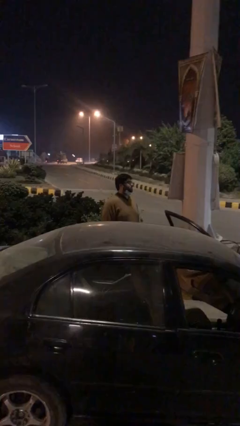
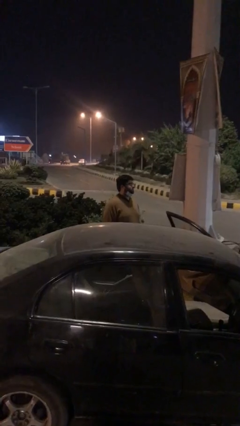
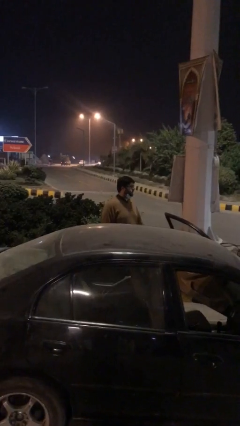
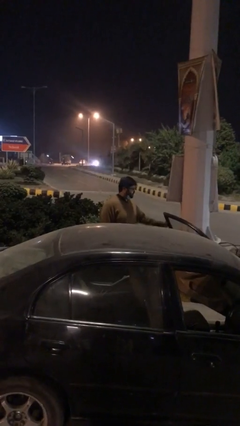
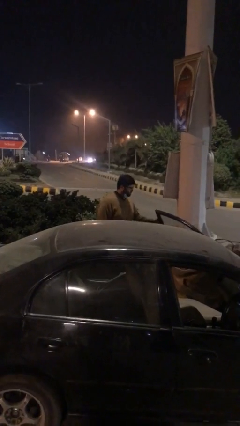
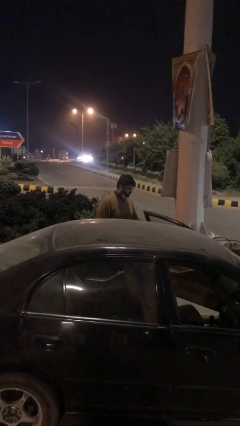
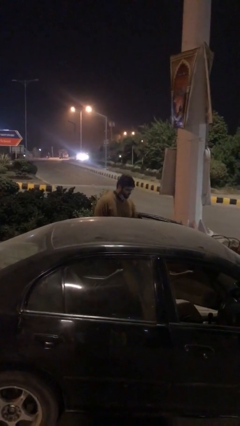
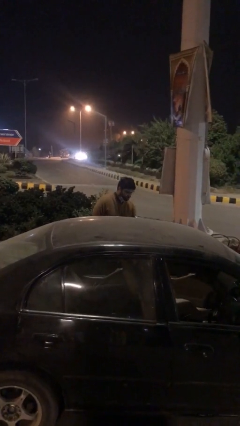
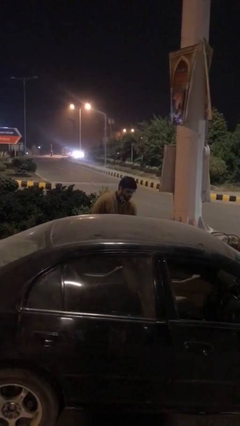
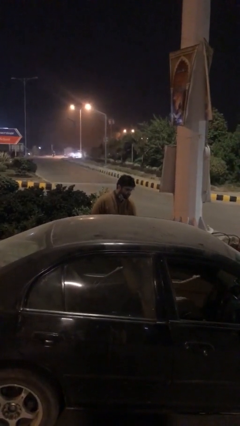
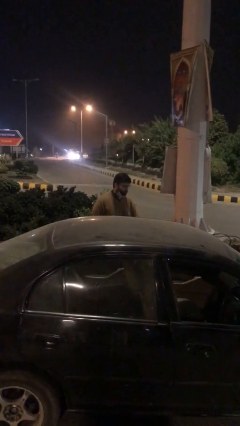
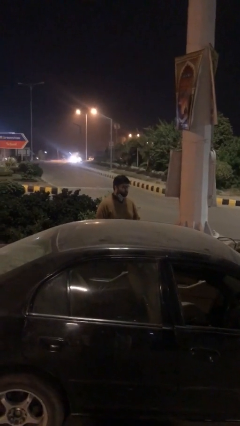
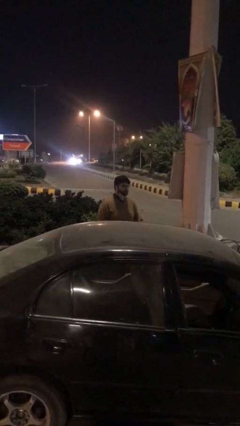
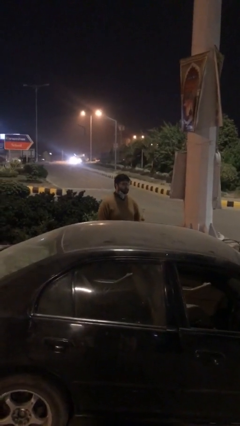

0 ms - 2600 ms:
person closes car door

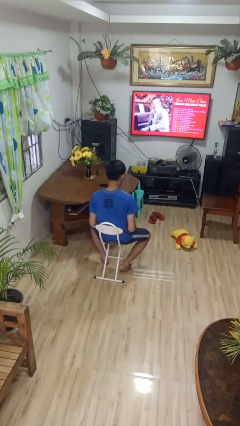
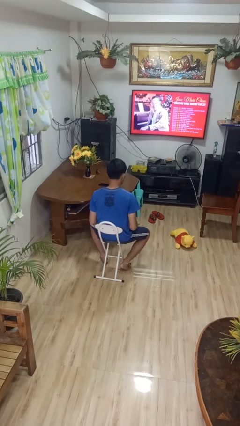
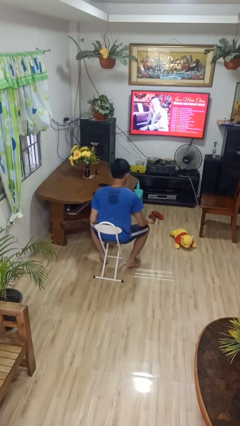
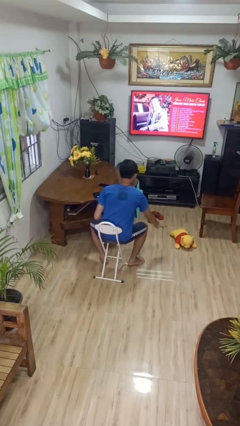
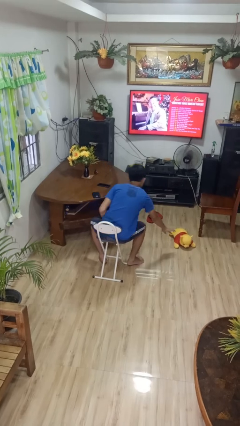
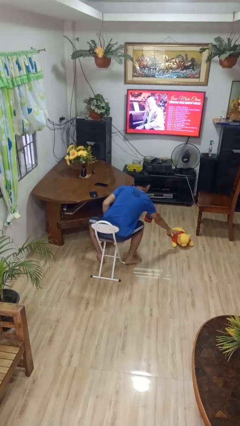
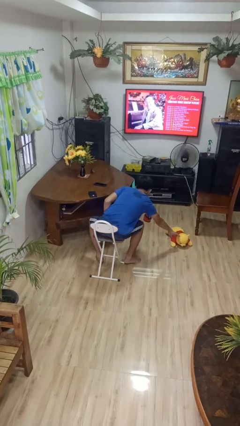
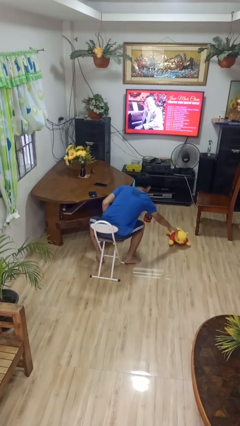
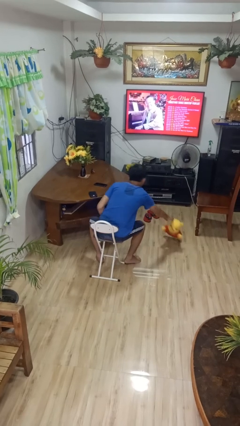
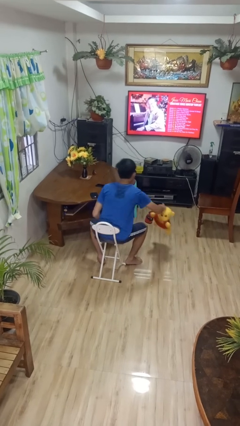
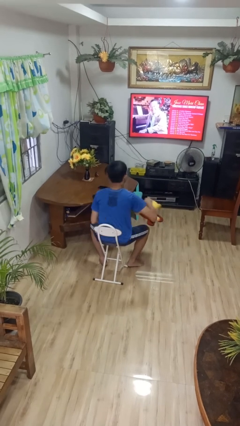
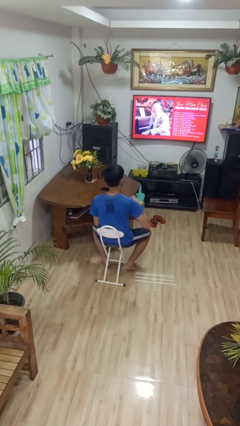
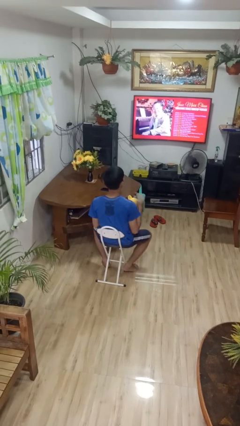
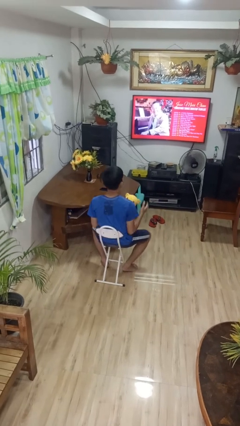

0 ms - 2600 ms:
person picks up object from floor

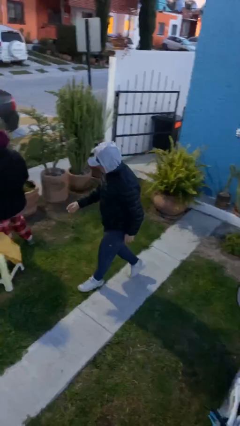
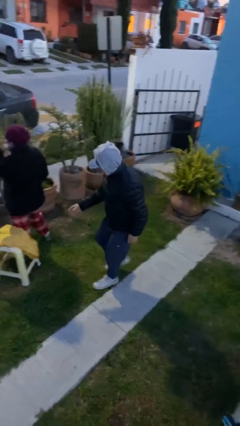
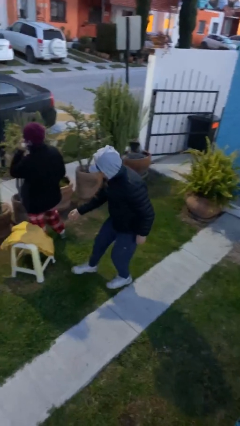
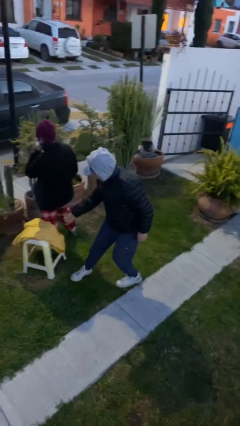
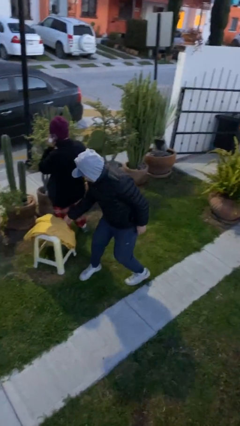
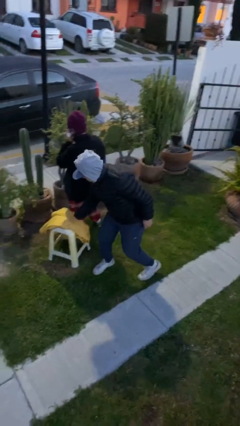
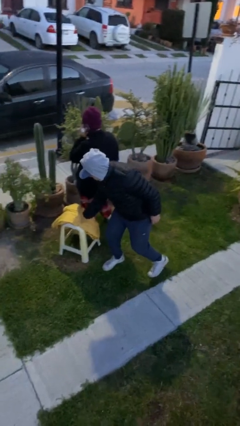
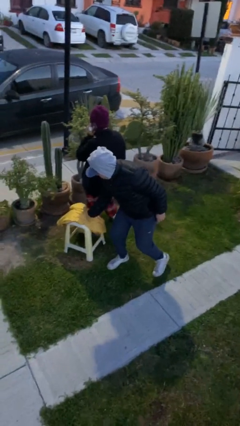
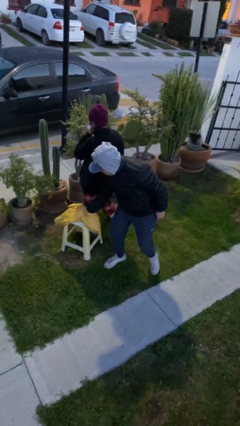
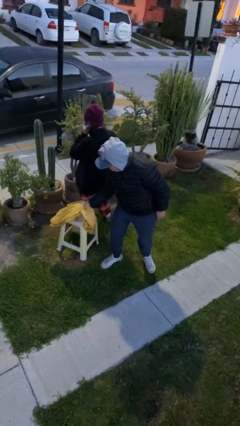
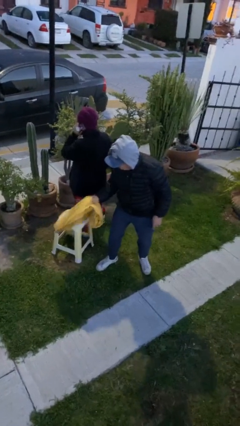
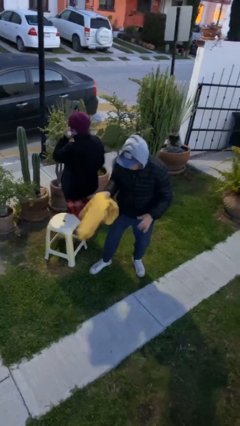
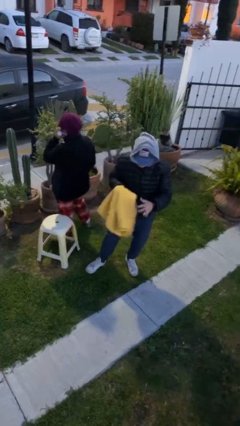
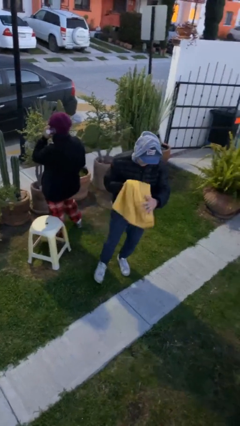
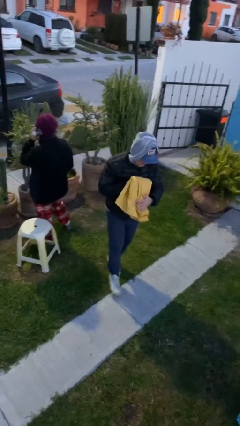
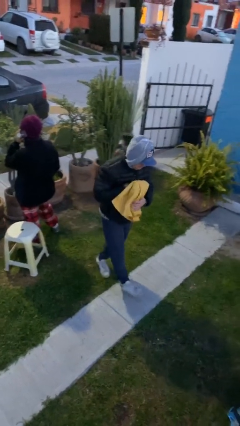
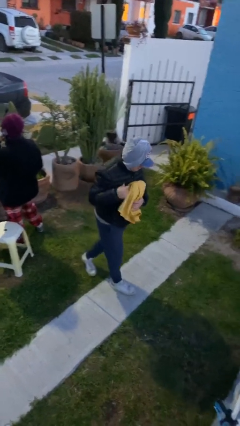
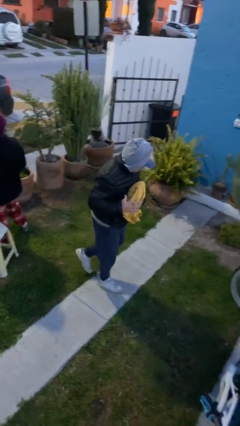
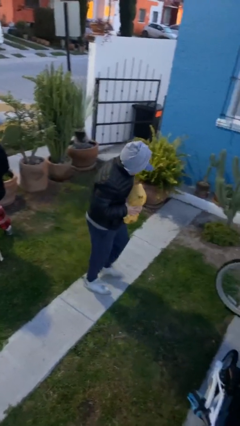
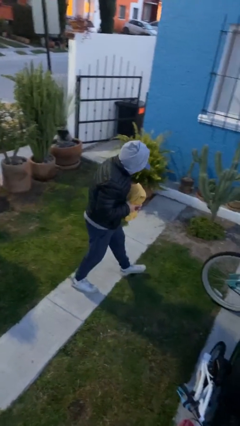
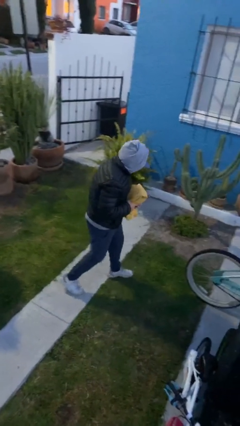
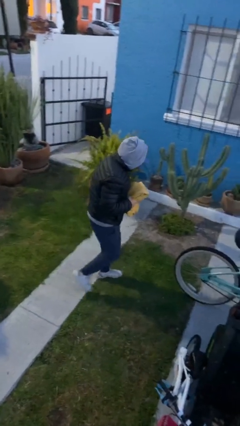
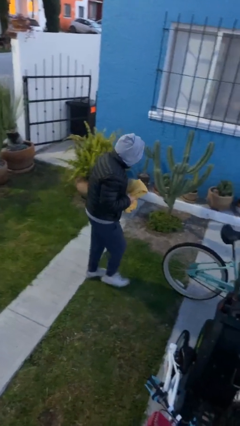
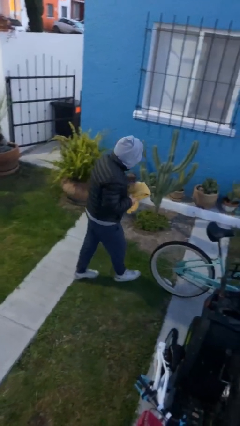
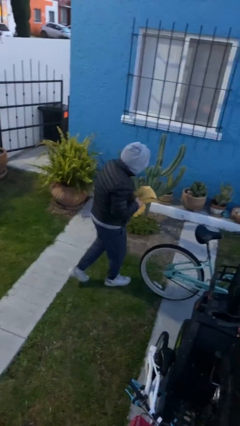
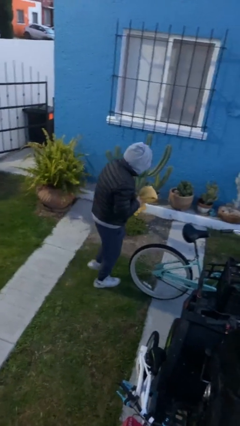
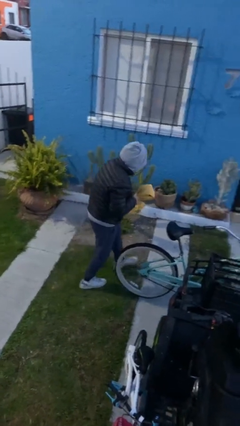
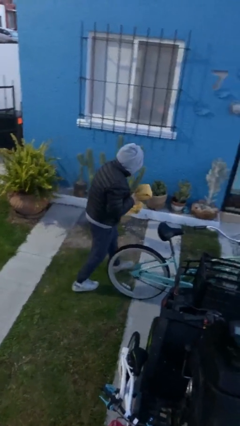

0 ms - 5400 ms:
person steals object from person

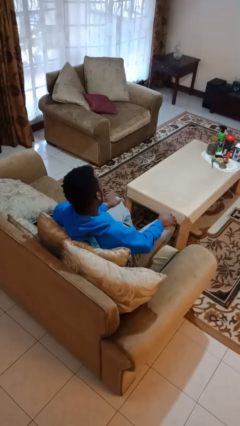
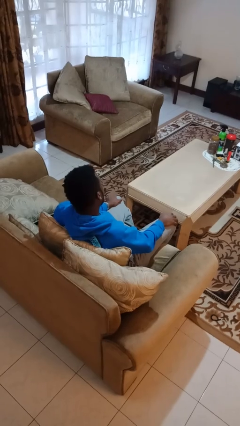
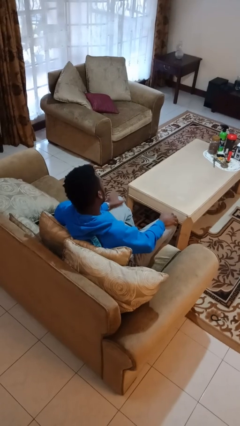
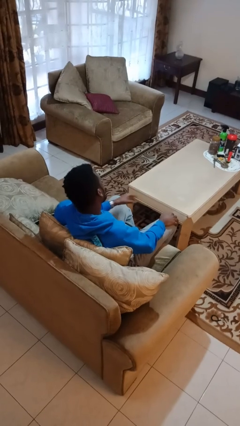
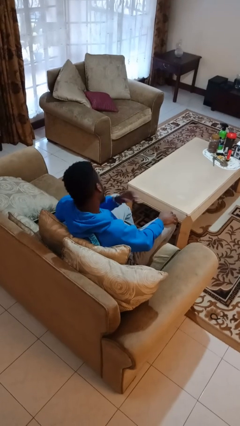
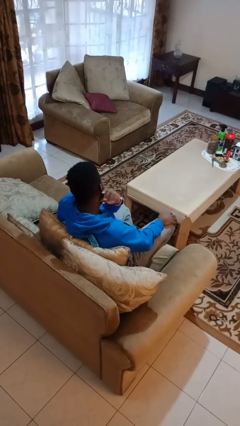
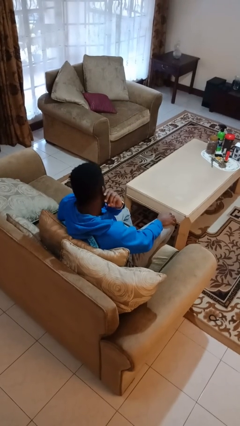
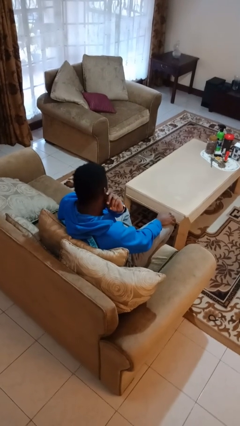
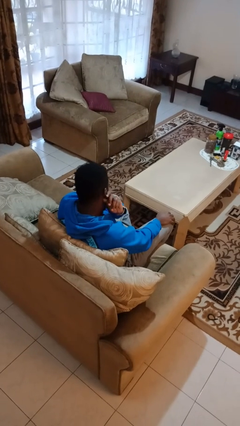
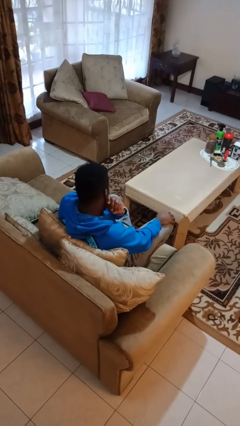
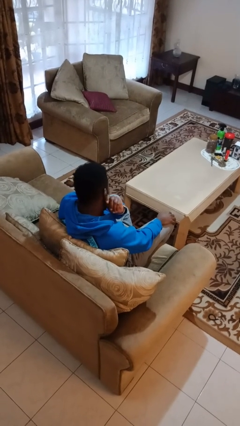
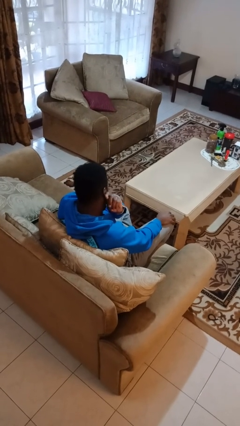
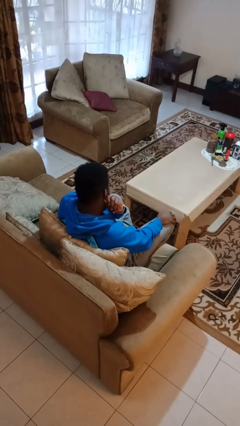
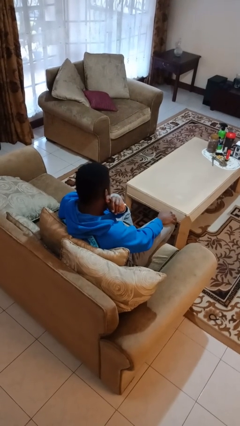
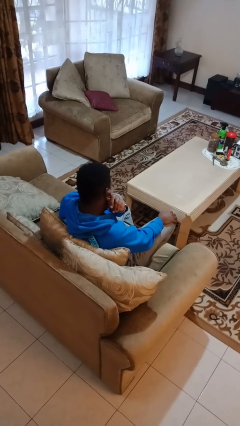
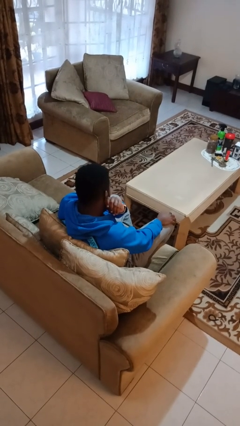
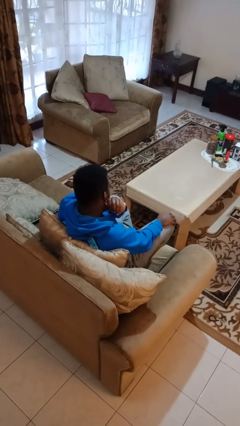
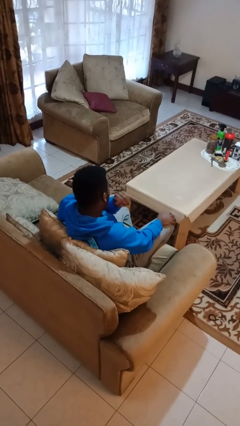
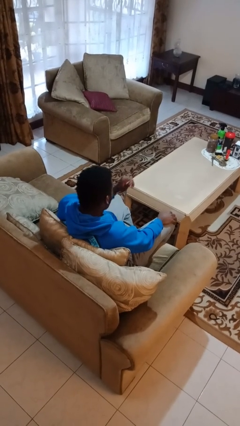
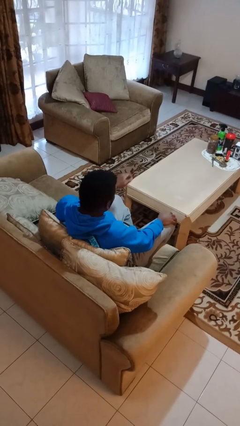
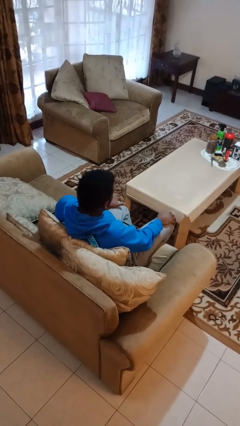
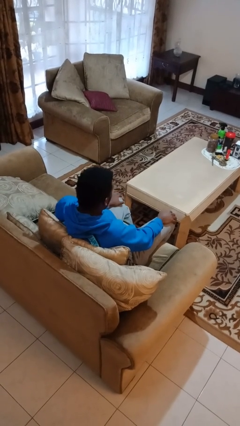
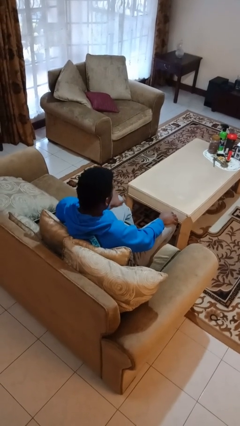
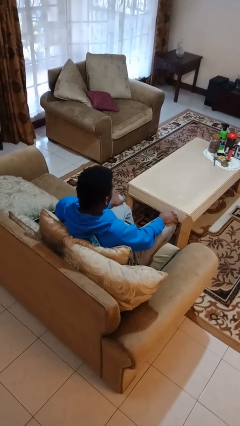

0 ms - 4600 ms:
person touches earlobe

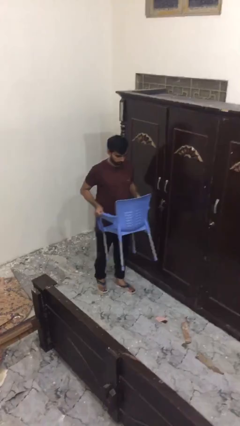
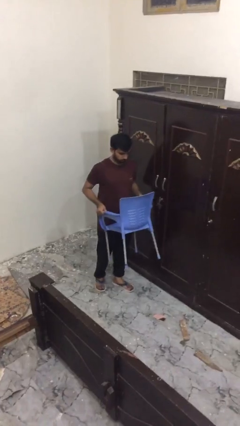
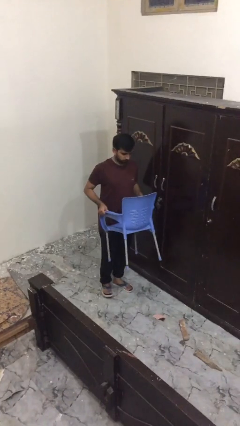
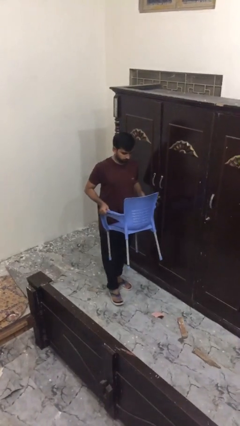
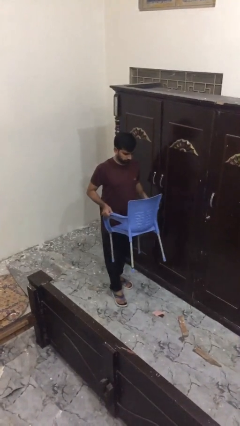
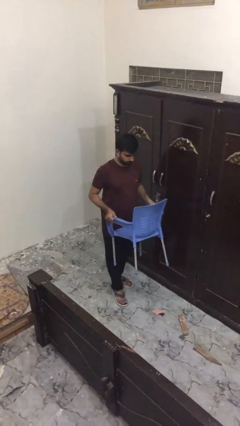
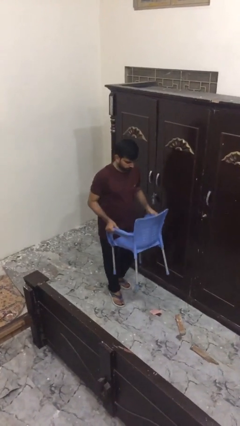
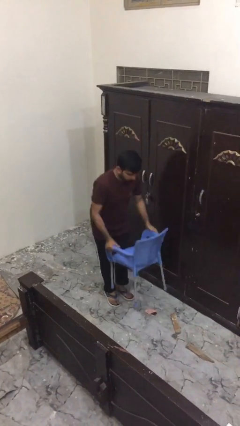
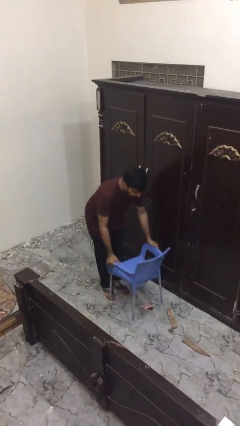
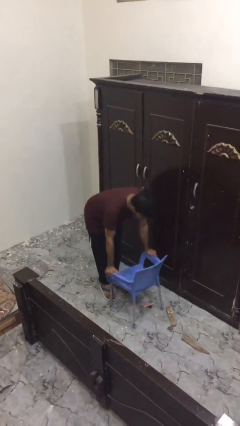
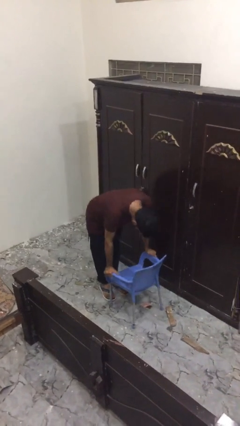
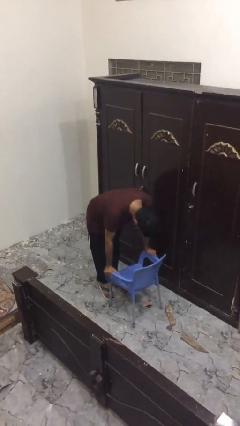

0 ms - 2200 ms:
person puts down object on floor

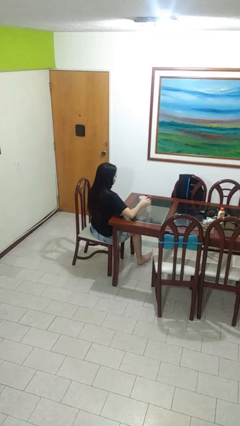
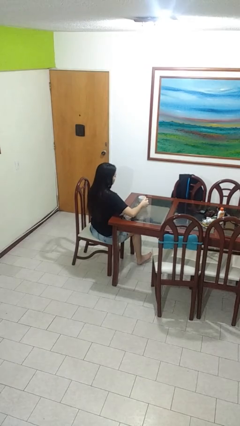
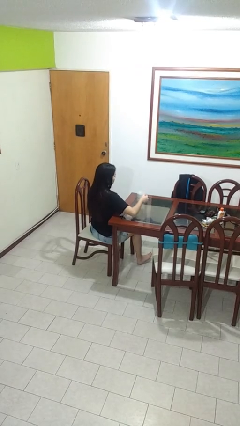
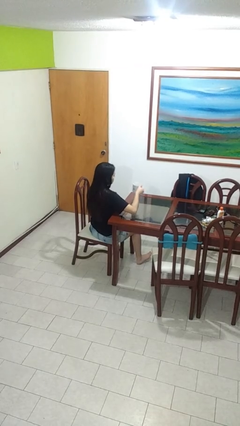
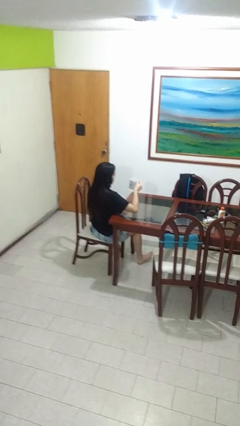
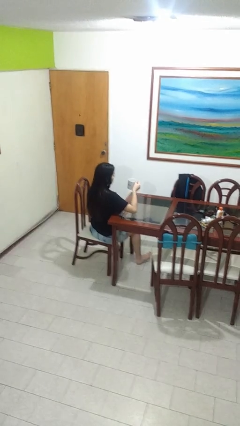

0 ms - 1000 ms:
person picks up object from table
